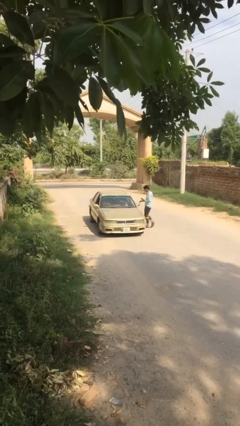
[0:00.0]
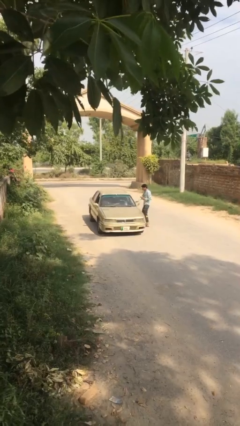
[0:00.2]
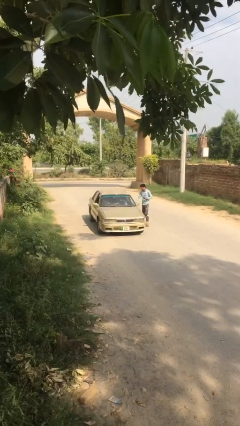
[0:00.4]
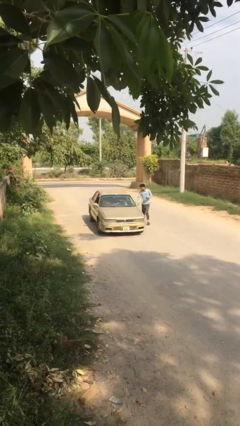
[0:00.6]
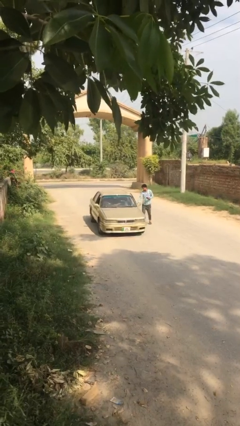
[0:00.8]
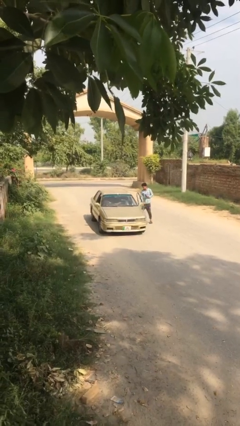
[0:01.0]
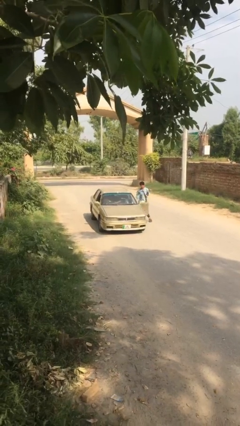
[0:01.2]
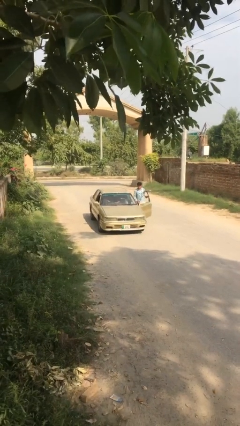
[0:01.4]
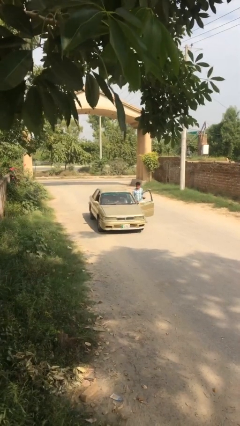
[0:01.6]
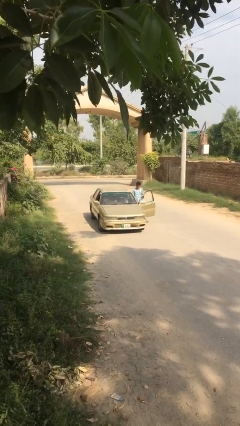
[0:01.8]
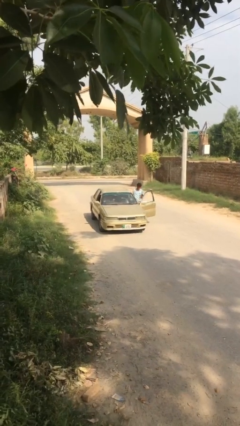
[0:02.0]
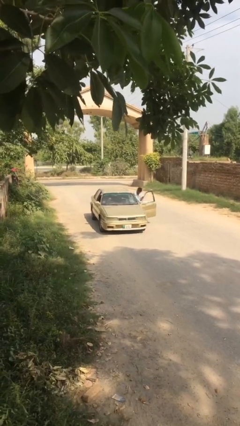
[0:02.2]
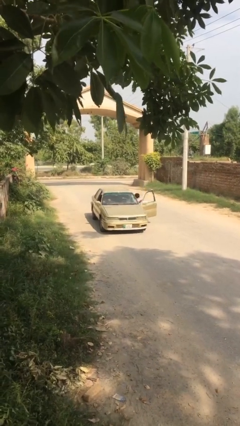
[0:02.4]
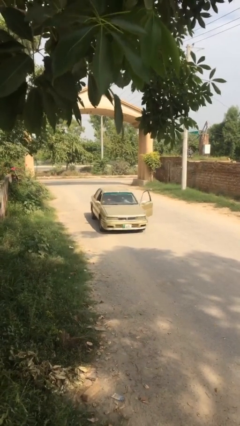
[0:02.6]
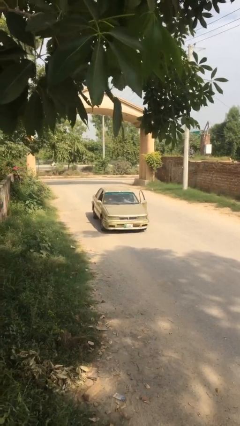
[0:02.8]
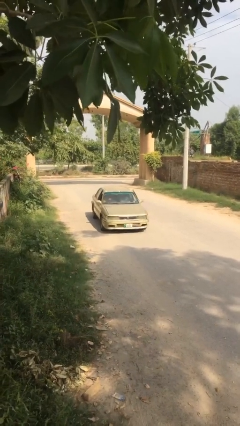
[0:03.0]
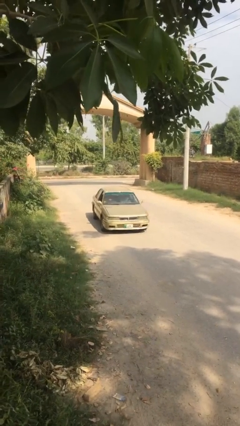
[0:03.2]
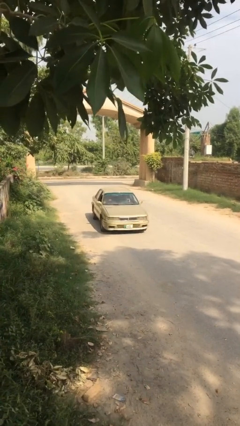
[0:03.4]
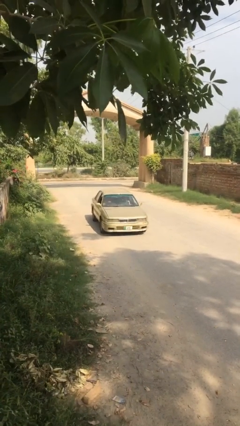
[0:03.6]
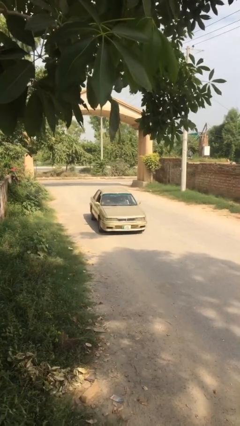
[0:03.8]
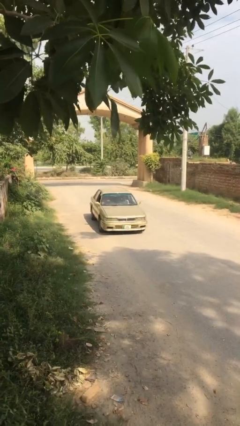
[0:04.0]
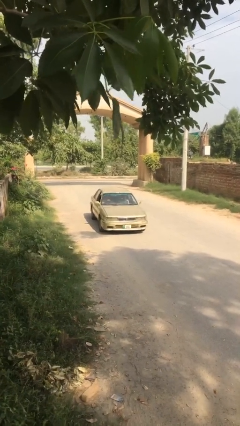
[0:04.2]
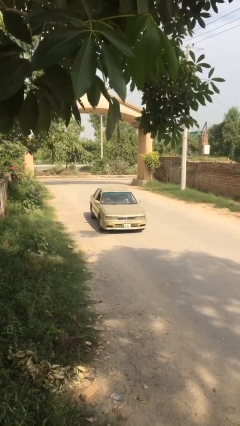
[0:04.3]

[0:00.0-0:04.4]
car picks up person

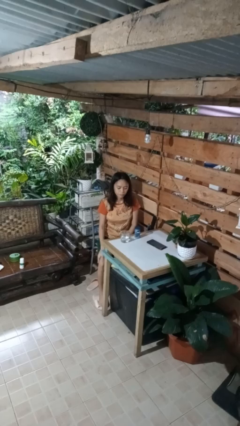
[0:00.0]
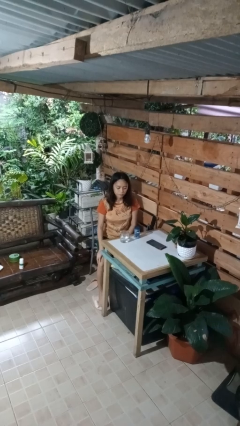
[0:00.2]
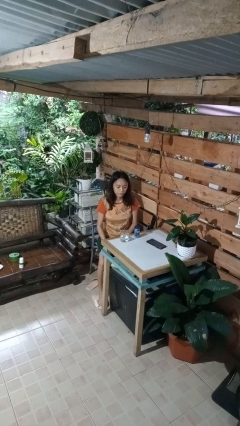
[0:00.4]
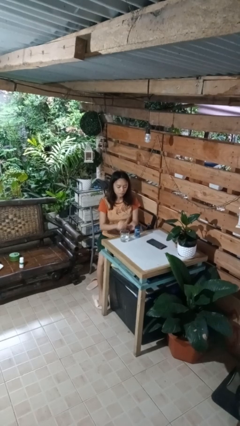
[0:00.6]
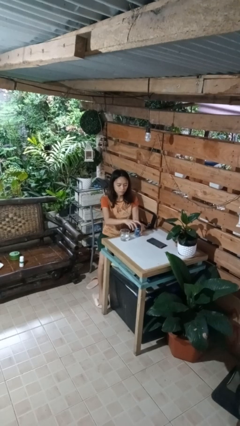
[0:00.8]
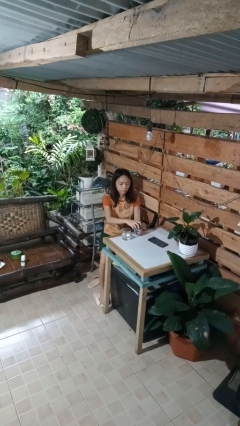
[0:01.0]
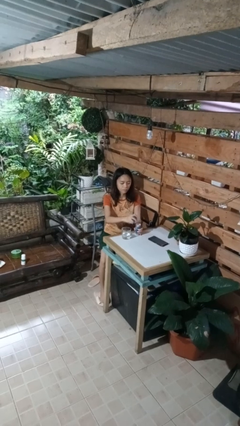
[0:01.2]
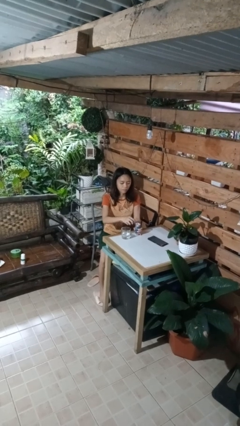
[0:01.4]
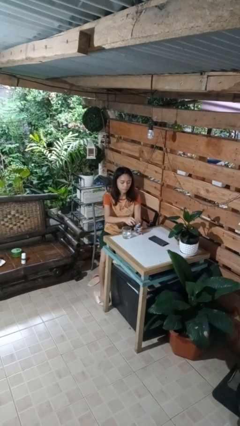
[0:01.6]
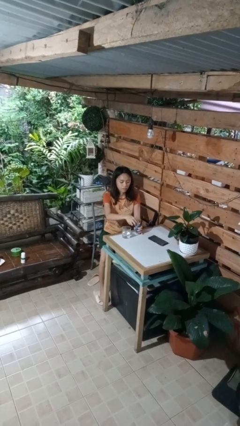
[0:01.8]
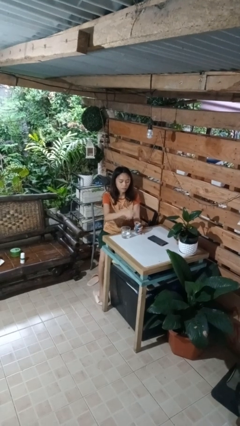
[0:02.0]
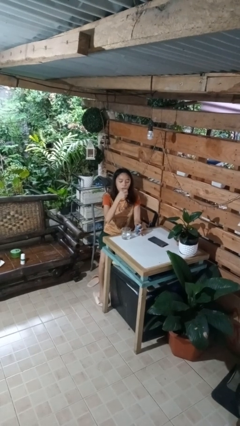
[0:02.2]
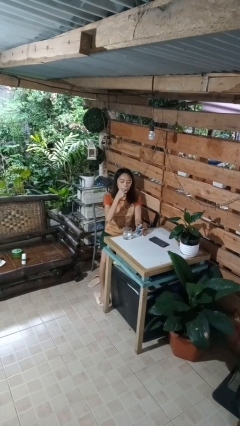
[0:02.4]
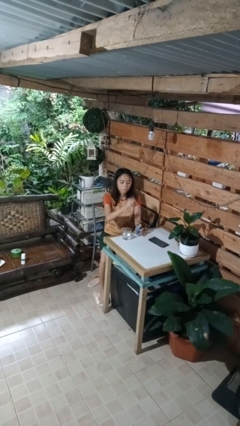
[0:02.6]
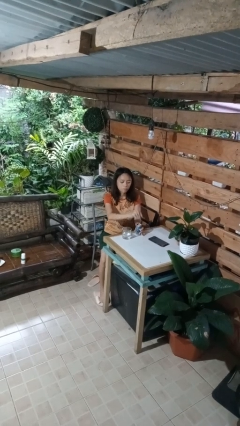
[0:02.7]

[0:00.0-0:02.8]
person takes medicine pills

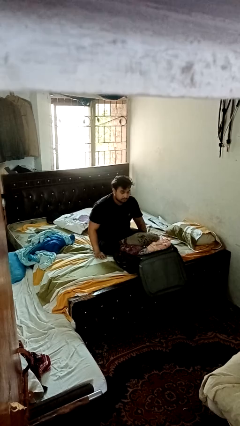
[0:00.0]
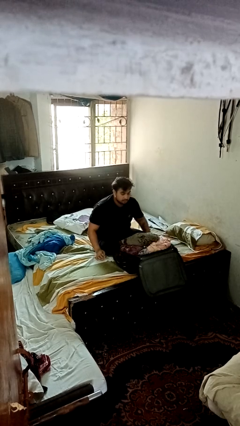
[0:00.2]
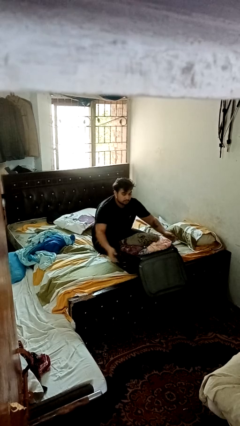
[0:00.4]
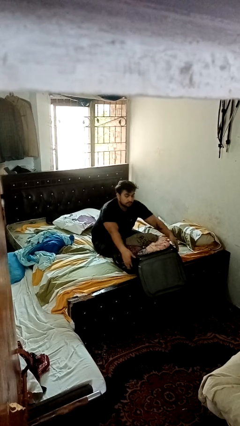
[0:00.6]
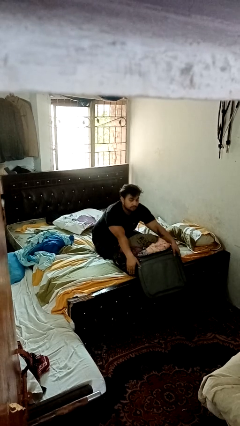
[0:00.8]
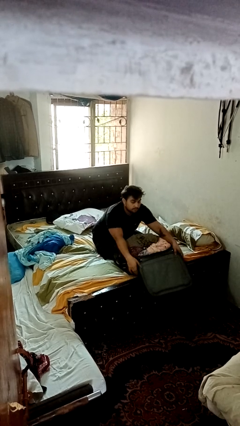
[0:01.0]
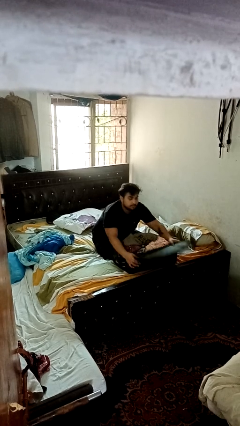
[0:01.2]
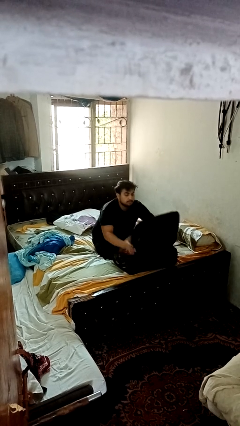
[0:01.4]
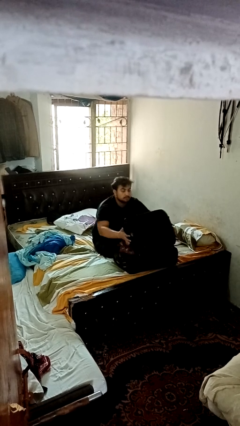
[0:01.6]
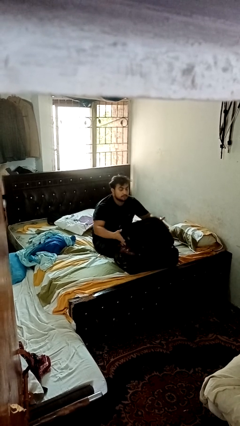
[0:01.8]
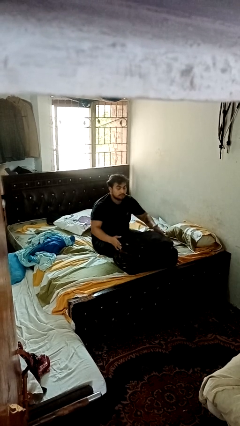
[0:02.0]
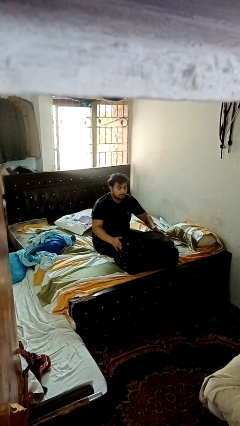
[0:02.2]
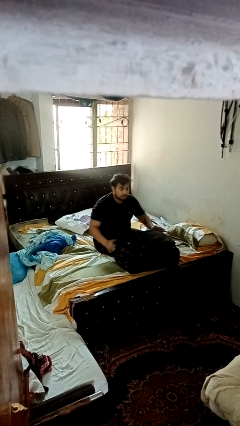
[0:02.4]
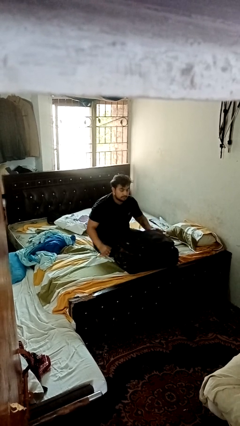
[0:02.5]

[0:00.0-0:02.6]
person closes suitcase

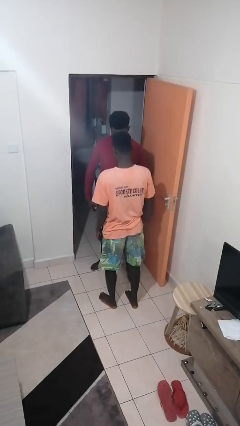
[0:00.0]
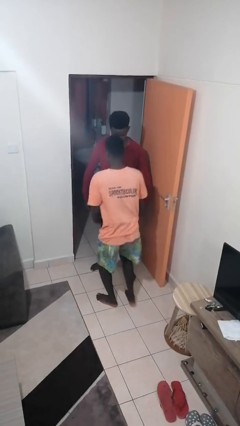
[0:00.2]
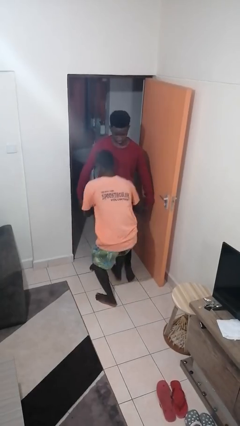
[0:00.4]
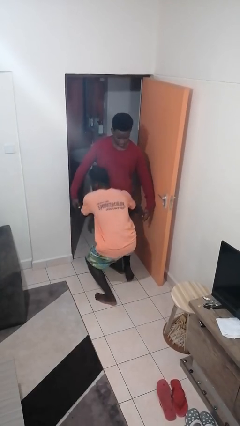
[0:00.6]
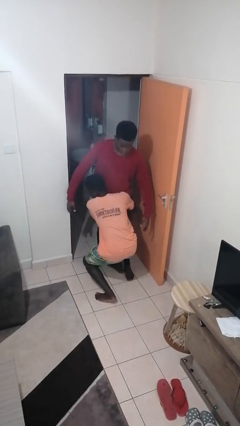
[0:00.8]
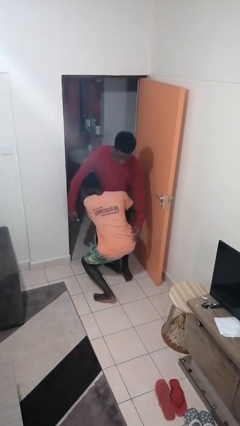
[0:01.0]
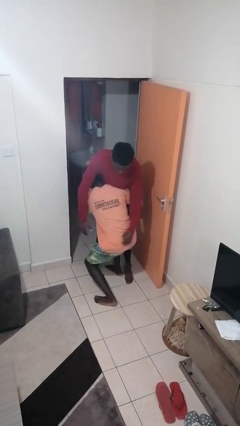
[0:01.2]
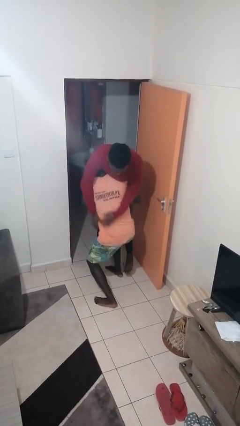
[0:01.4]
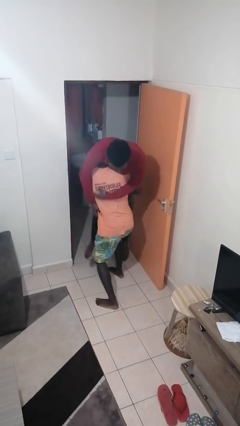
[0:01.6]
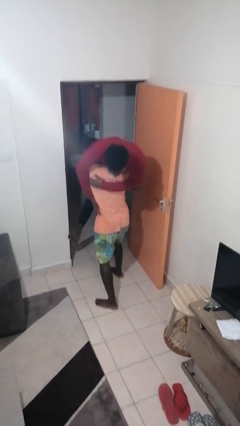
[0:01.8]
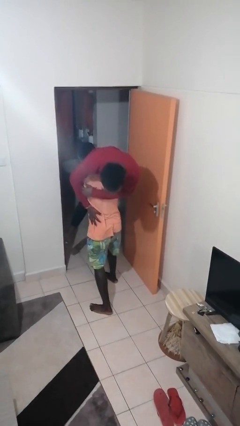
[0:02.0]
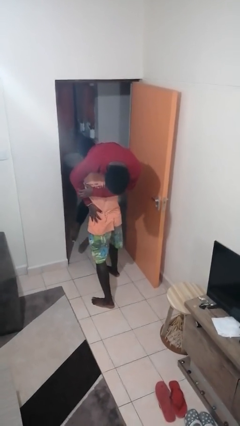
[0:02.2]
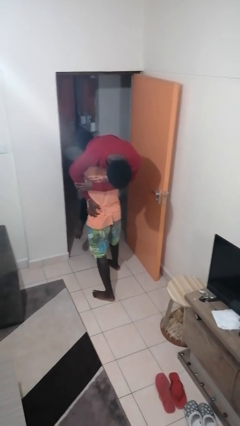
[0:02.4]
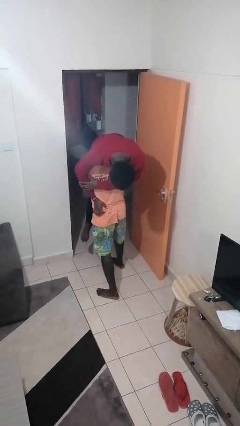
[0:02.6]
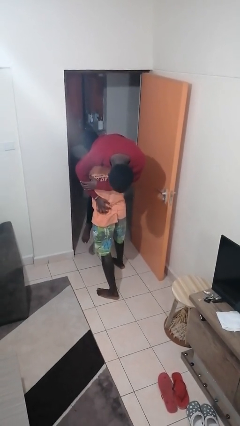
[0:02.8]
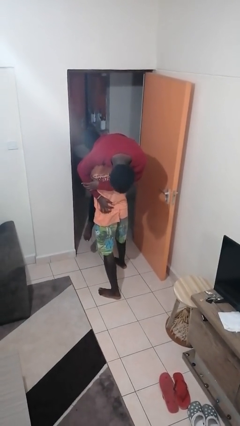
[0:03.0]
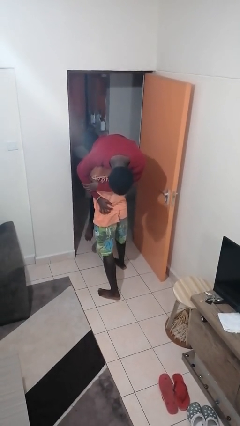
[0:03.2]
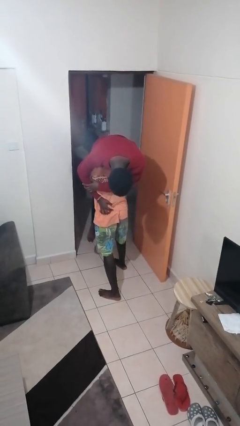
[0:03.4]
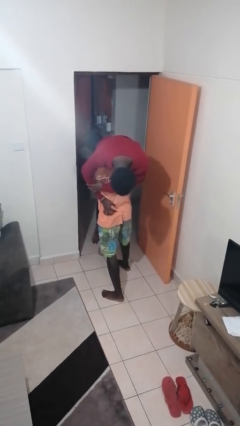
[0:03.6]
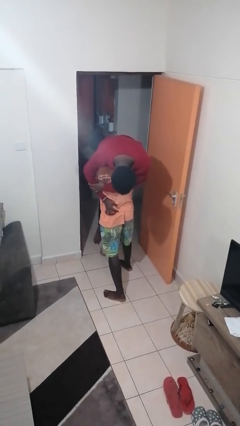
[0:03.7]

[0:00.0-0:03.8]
person carries person over shoulder

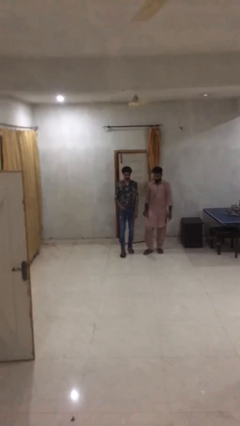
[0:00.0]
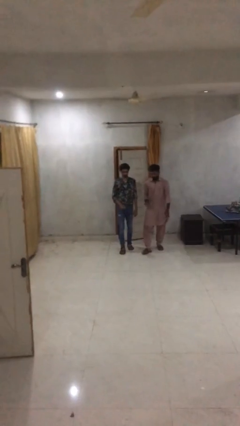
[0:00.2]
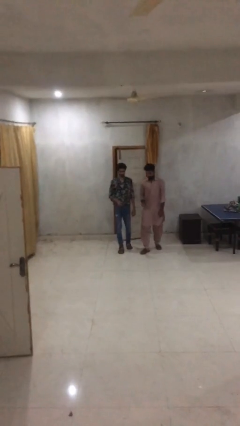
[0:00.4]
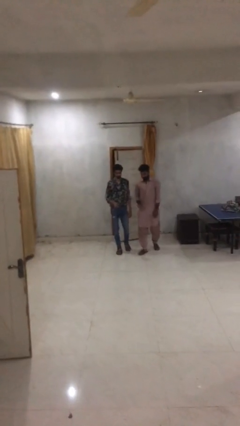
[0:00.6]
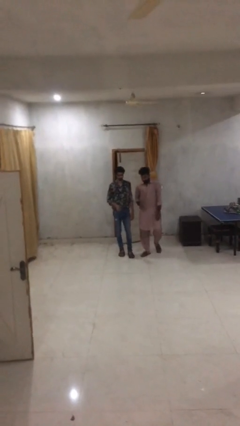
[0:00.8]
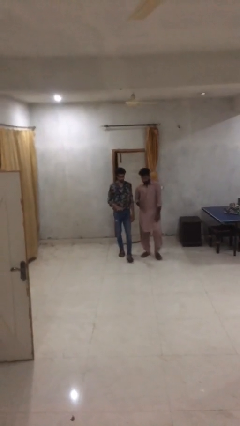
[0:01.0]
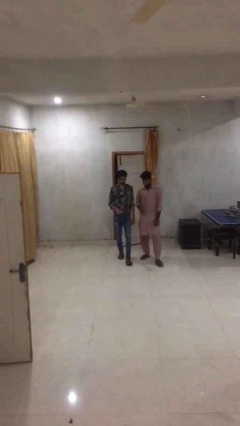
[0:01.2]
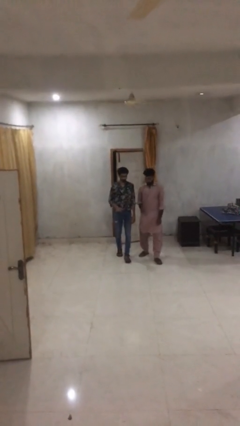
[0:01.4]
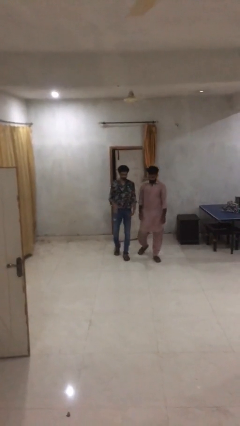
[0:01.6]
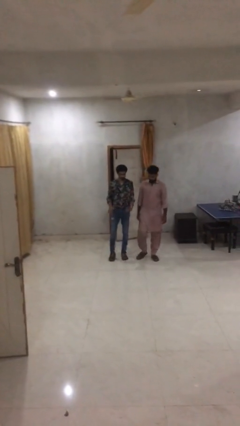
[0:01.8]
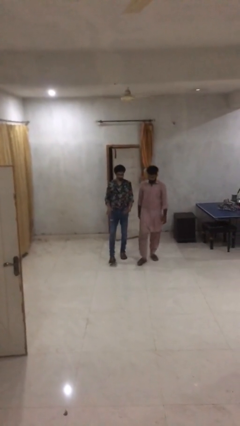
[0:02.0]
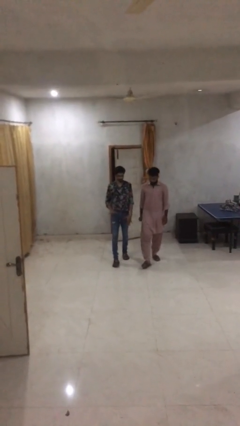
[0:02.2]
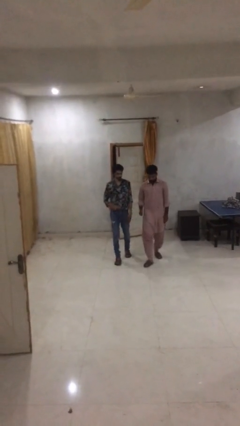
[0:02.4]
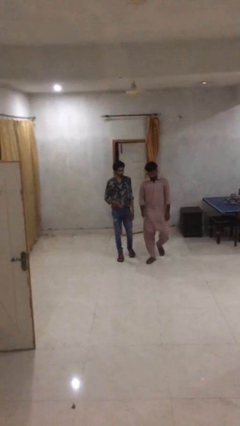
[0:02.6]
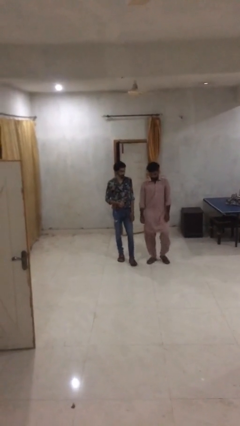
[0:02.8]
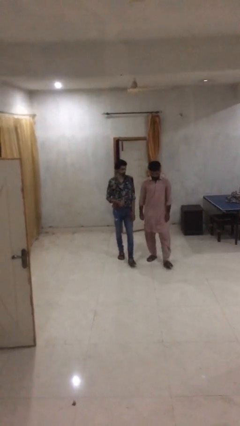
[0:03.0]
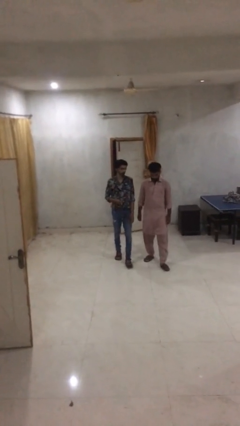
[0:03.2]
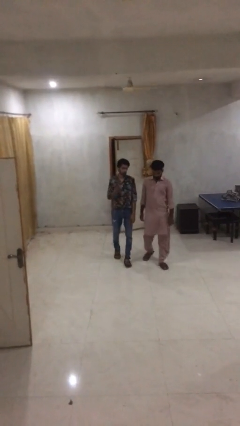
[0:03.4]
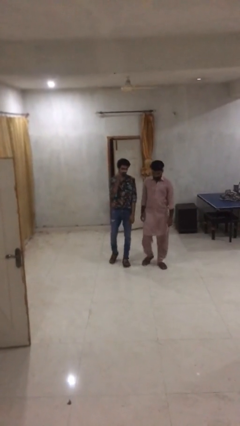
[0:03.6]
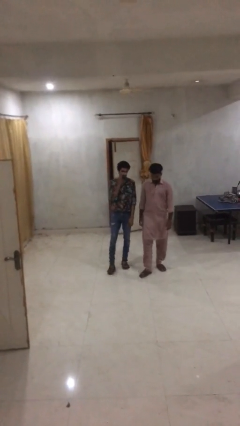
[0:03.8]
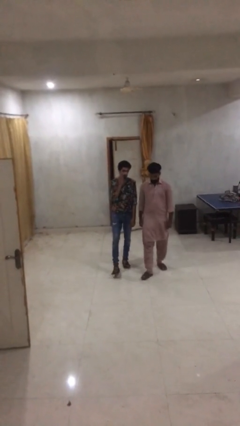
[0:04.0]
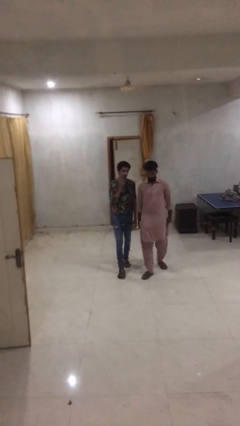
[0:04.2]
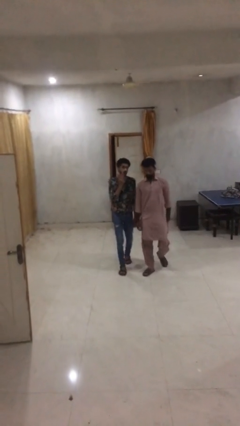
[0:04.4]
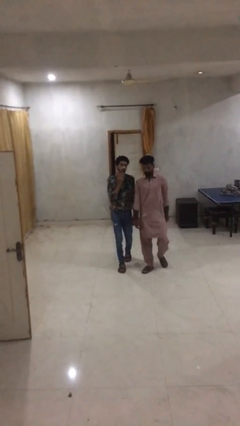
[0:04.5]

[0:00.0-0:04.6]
person talks to person
